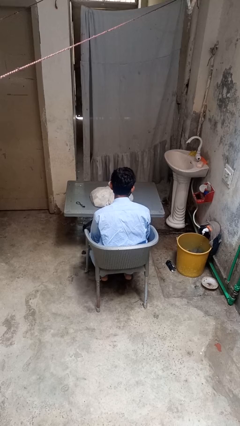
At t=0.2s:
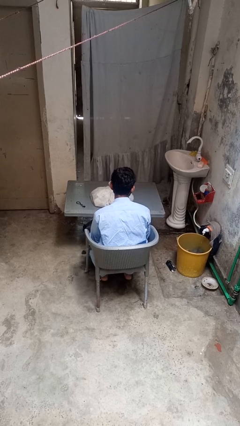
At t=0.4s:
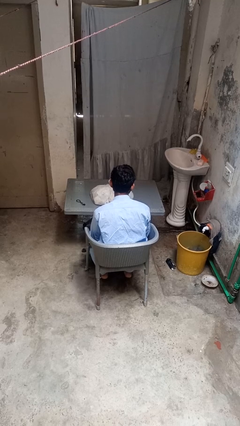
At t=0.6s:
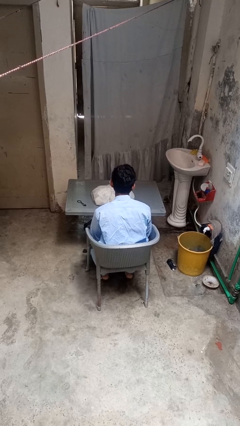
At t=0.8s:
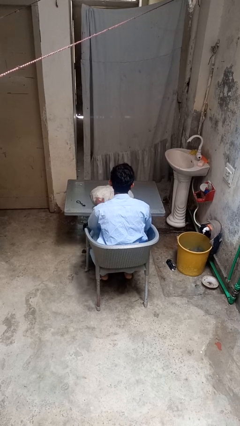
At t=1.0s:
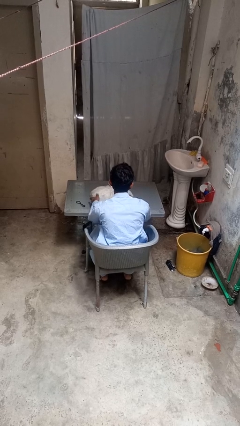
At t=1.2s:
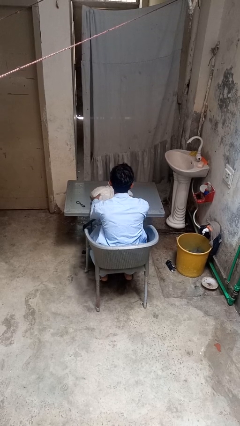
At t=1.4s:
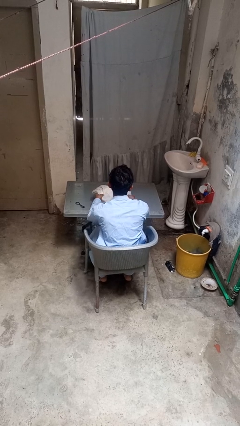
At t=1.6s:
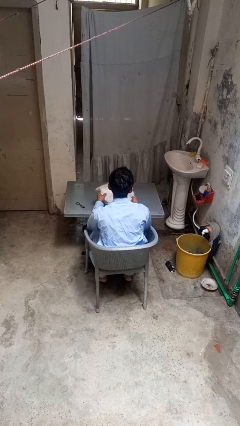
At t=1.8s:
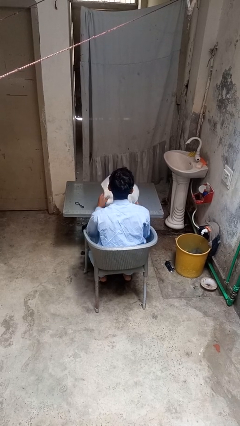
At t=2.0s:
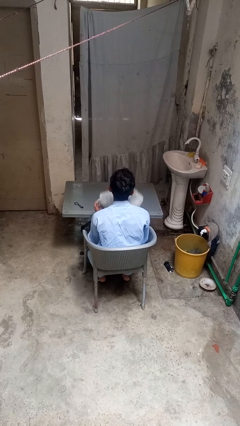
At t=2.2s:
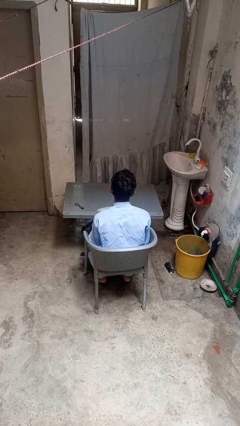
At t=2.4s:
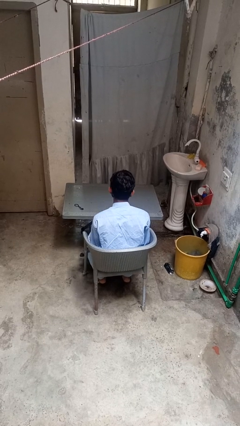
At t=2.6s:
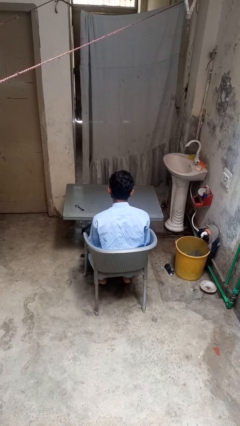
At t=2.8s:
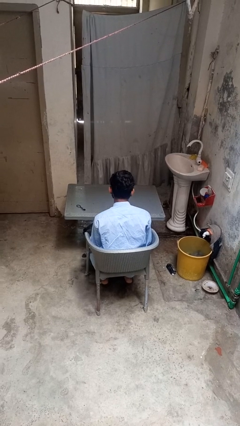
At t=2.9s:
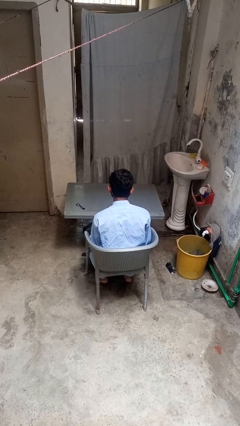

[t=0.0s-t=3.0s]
person picks up object from table

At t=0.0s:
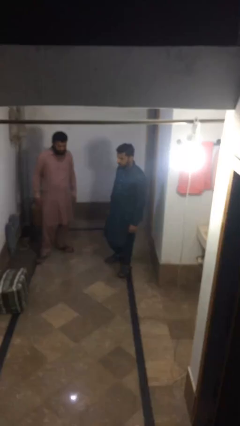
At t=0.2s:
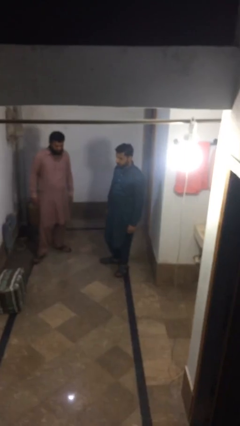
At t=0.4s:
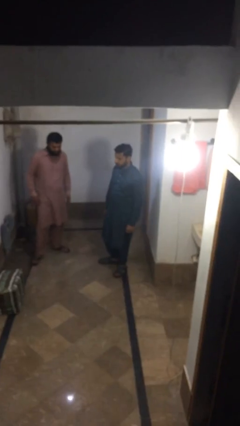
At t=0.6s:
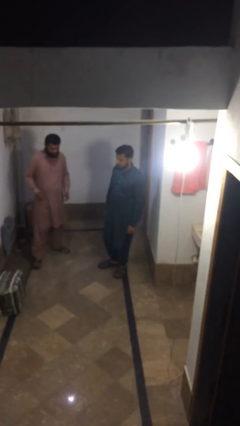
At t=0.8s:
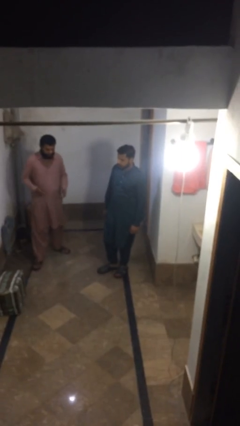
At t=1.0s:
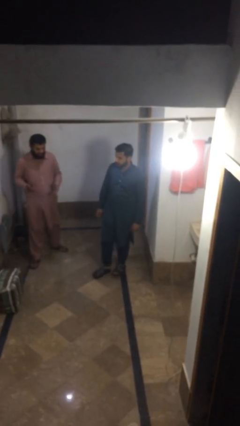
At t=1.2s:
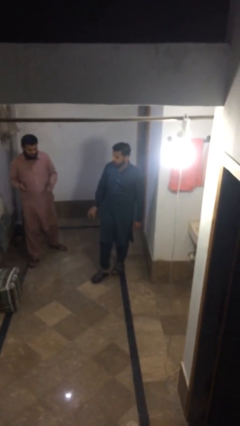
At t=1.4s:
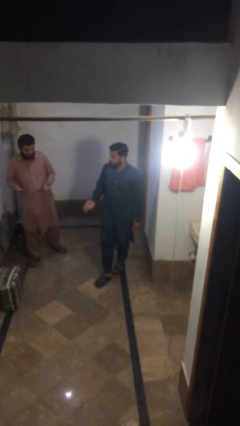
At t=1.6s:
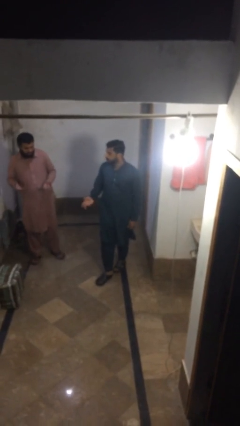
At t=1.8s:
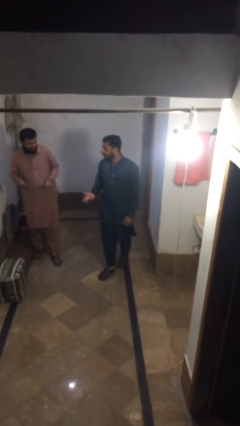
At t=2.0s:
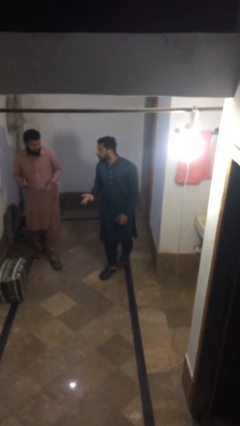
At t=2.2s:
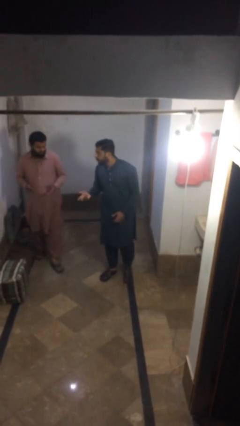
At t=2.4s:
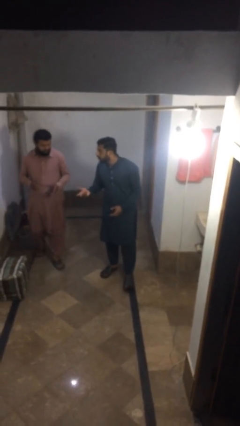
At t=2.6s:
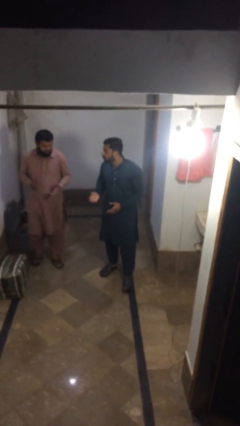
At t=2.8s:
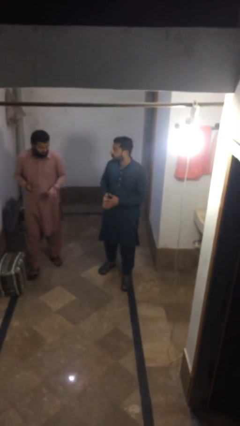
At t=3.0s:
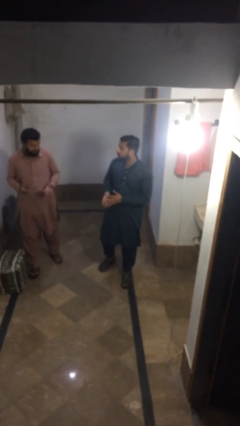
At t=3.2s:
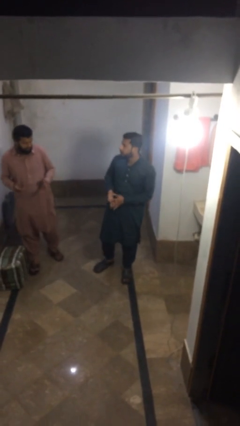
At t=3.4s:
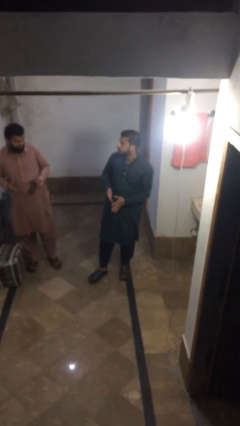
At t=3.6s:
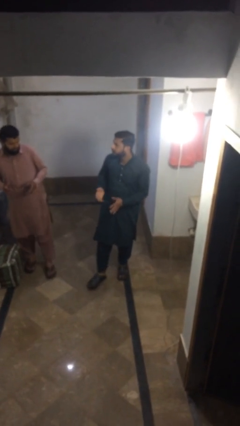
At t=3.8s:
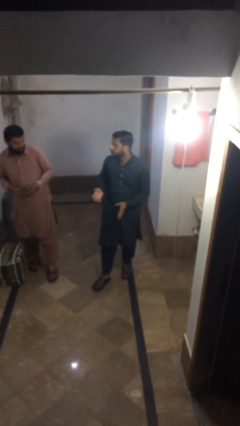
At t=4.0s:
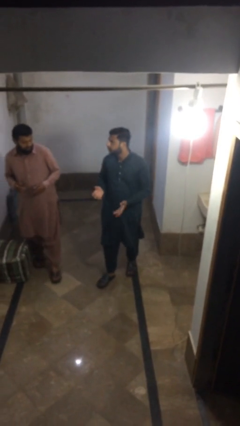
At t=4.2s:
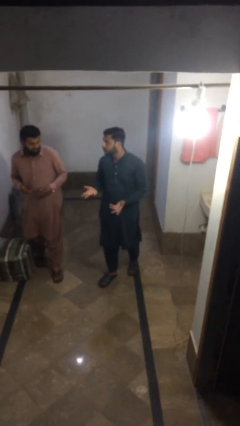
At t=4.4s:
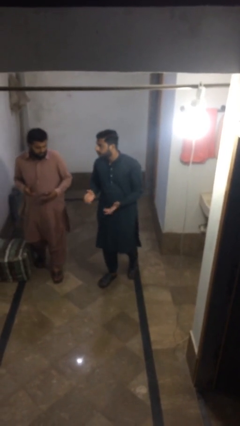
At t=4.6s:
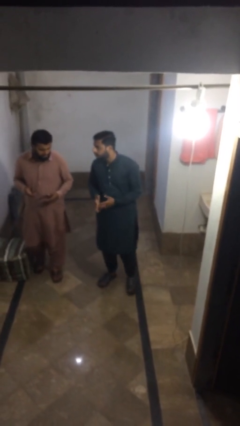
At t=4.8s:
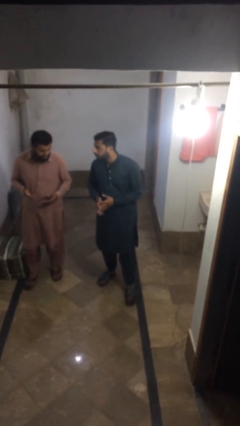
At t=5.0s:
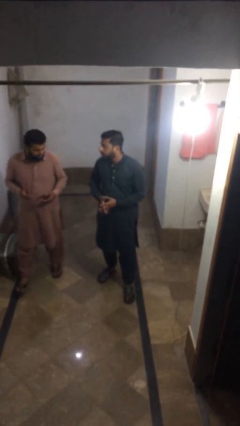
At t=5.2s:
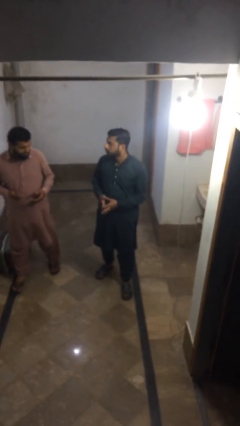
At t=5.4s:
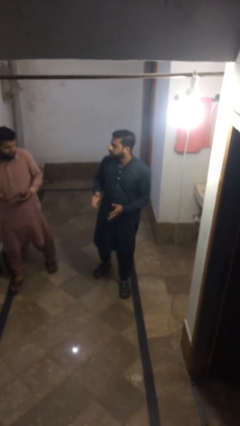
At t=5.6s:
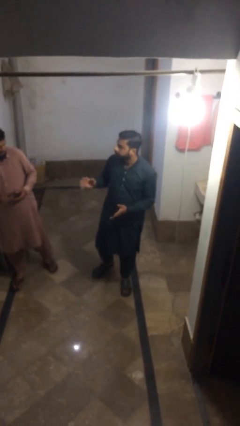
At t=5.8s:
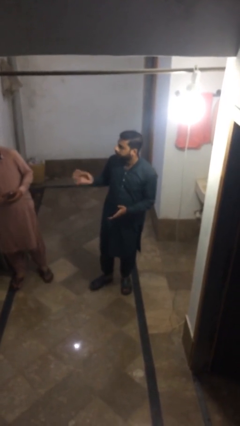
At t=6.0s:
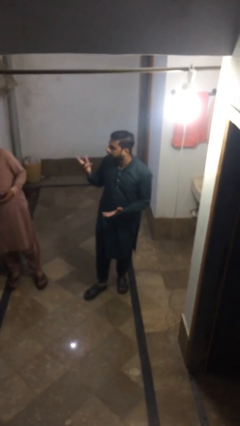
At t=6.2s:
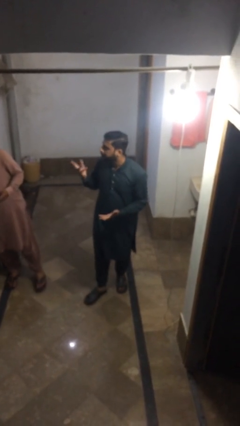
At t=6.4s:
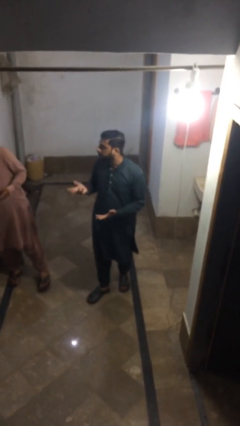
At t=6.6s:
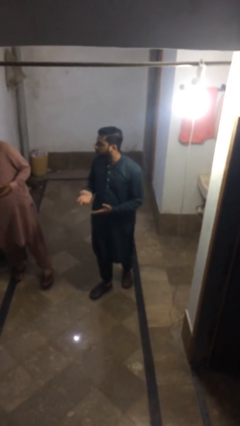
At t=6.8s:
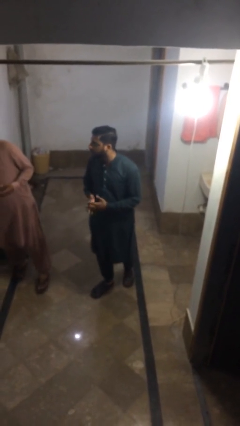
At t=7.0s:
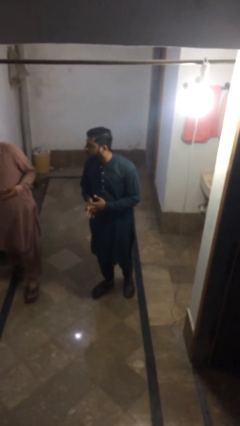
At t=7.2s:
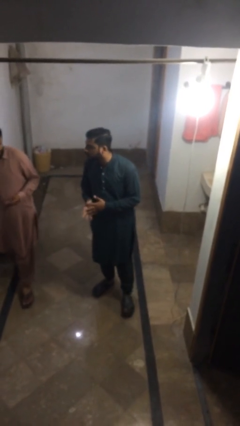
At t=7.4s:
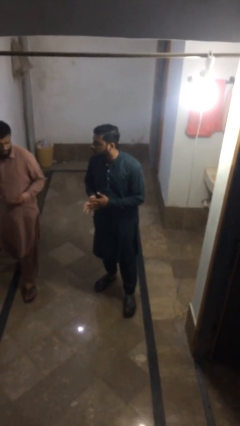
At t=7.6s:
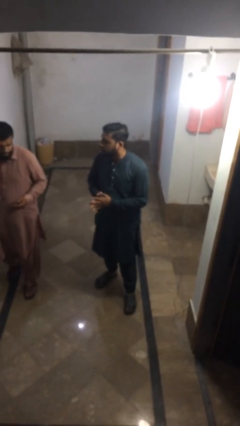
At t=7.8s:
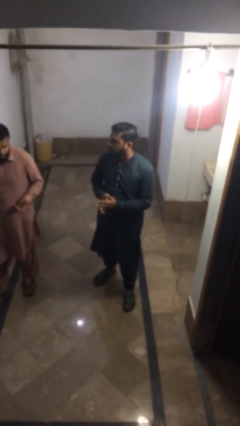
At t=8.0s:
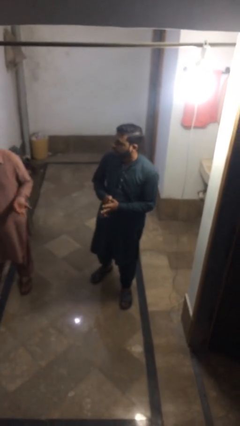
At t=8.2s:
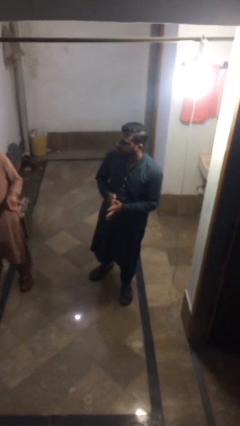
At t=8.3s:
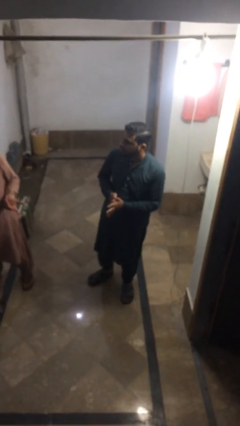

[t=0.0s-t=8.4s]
person talks to person

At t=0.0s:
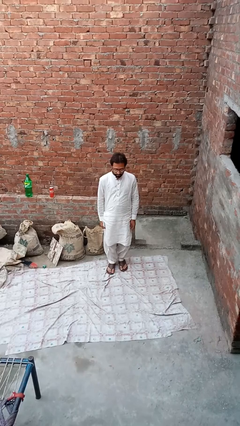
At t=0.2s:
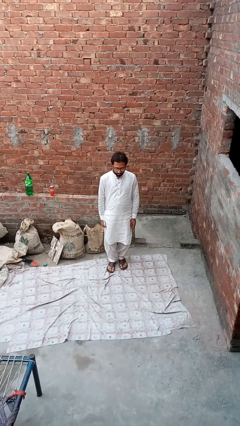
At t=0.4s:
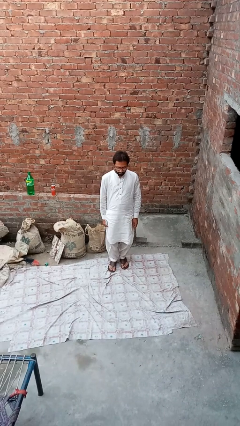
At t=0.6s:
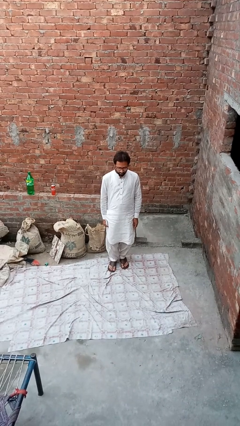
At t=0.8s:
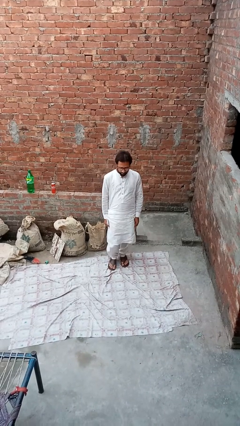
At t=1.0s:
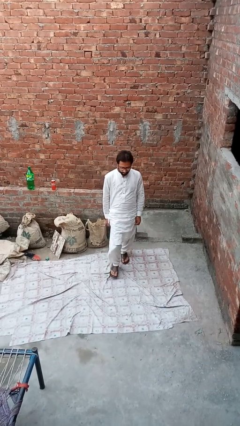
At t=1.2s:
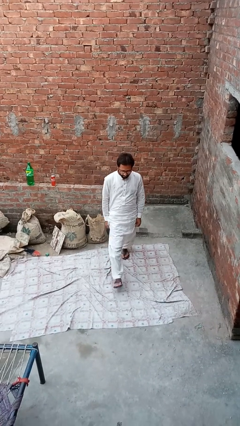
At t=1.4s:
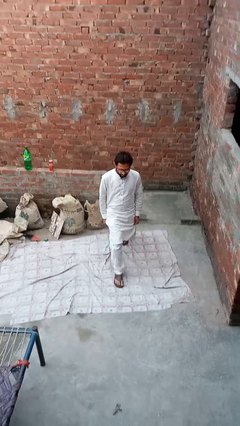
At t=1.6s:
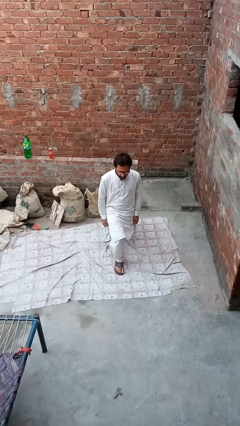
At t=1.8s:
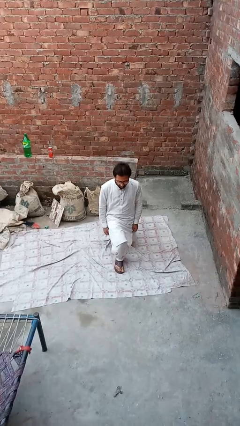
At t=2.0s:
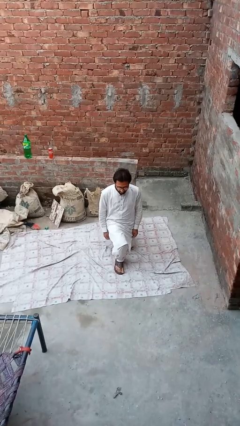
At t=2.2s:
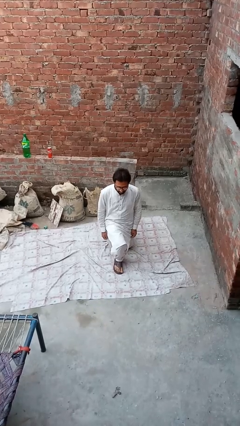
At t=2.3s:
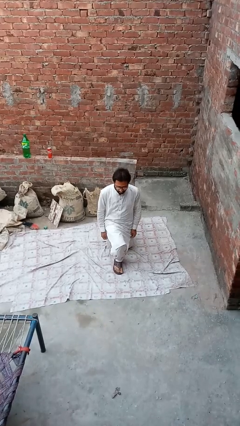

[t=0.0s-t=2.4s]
person exercises with lunges

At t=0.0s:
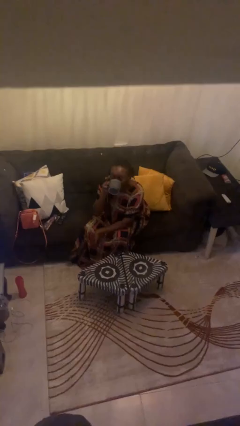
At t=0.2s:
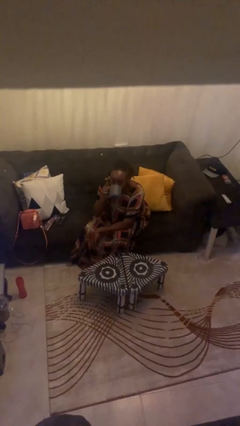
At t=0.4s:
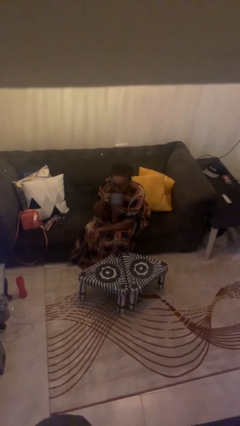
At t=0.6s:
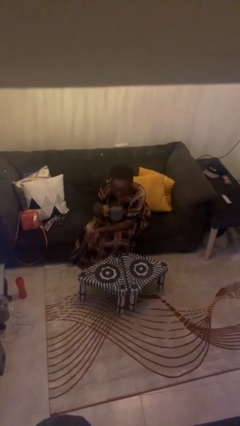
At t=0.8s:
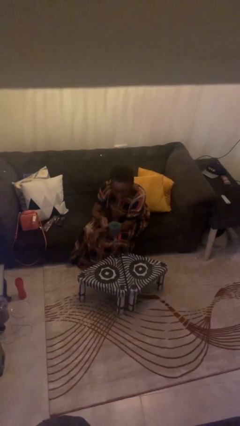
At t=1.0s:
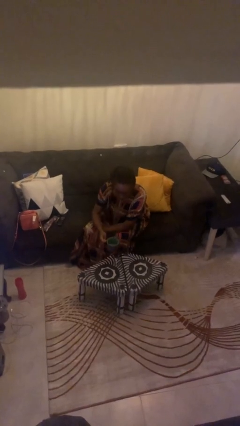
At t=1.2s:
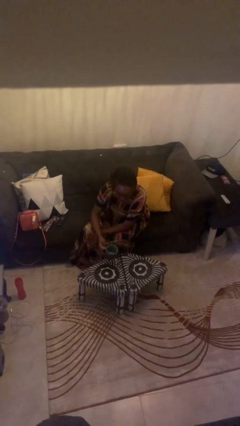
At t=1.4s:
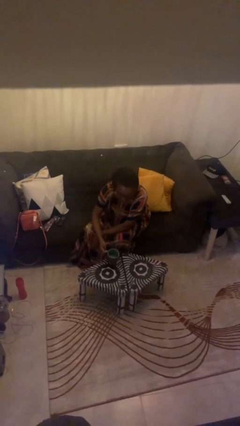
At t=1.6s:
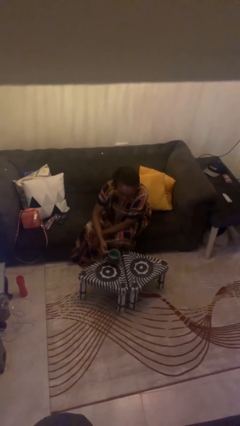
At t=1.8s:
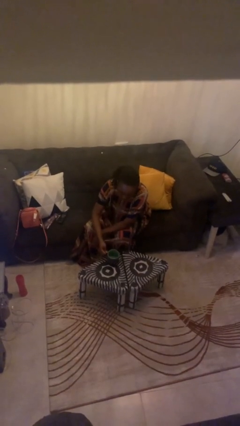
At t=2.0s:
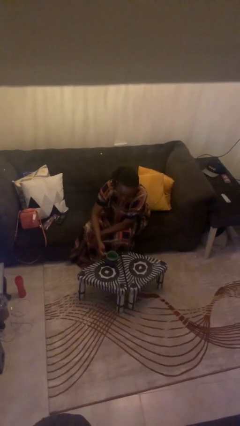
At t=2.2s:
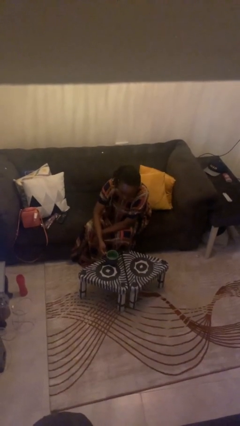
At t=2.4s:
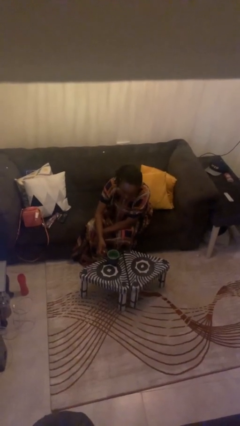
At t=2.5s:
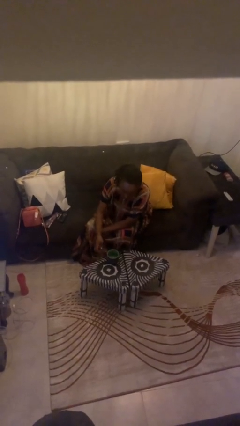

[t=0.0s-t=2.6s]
person puts down object on table

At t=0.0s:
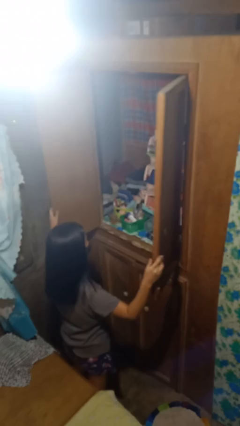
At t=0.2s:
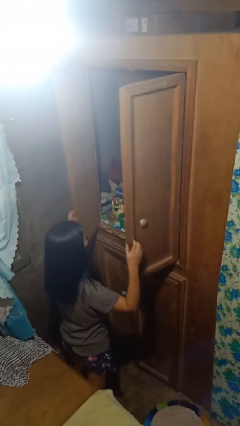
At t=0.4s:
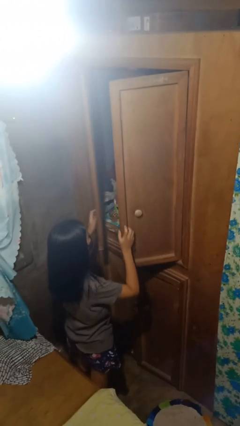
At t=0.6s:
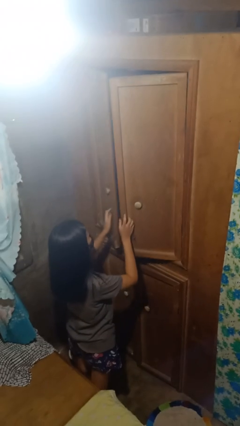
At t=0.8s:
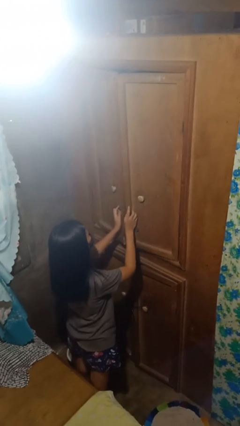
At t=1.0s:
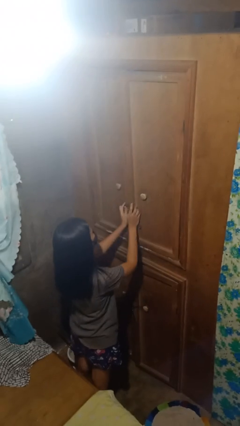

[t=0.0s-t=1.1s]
person closes closet door

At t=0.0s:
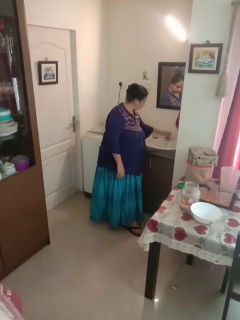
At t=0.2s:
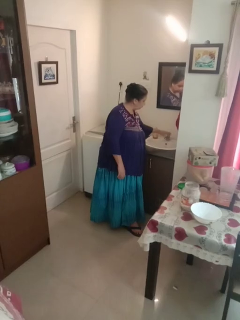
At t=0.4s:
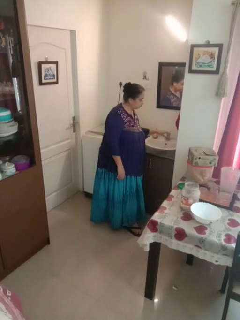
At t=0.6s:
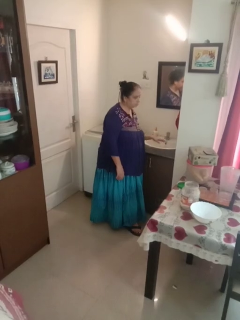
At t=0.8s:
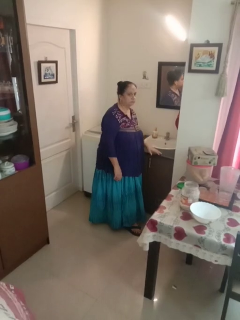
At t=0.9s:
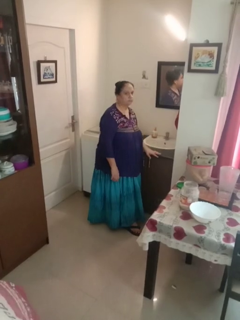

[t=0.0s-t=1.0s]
person turns off faucet
